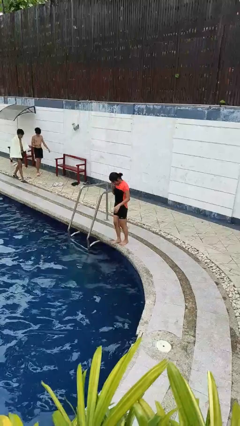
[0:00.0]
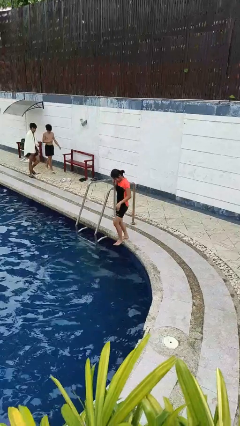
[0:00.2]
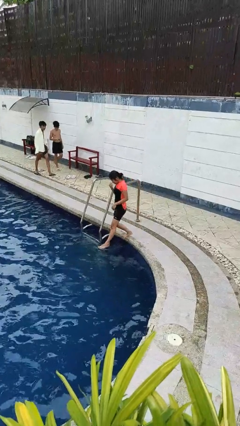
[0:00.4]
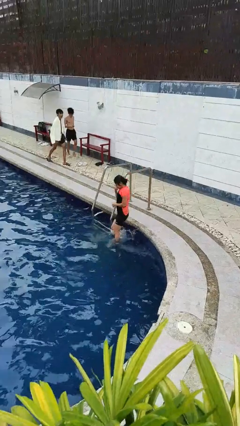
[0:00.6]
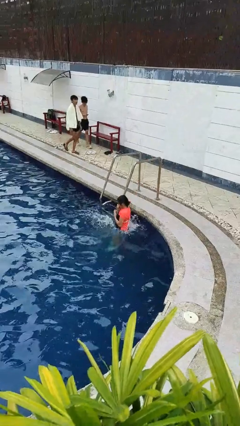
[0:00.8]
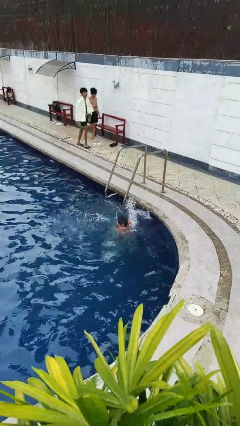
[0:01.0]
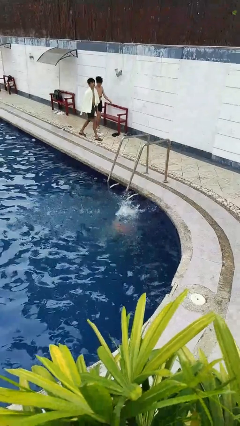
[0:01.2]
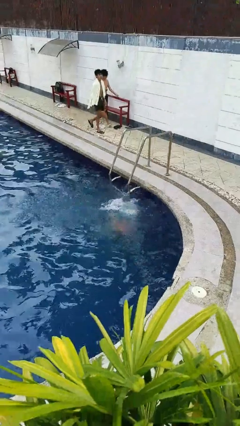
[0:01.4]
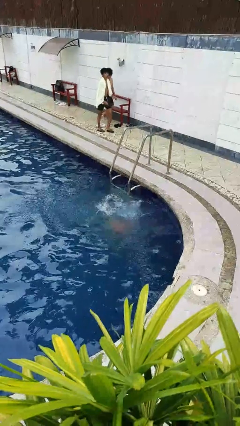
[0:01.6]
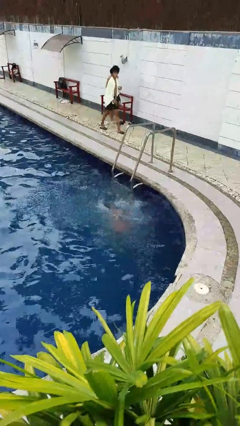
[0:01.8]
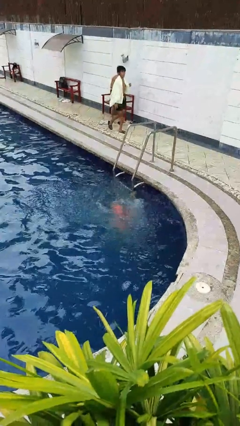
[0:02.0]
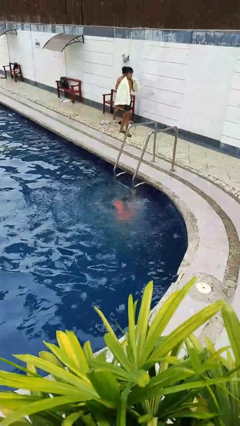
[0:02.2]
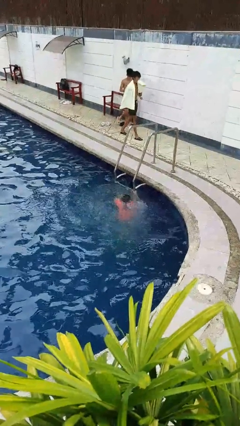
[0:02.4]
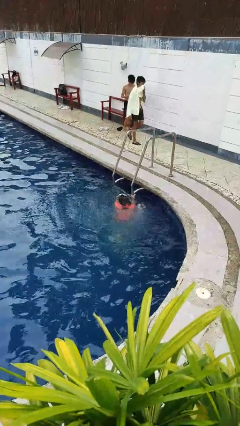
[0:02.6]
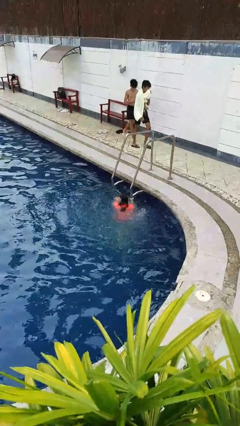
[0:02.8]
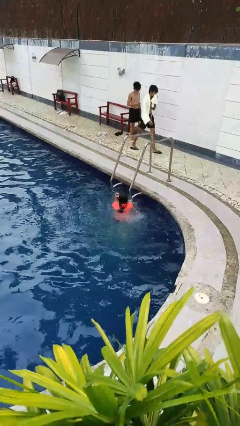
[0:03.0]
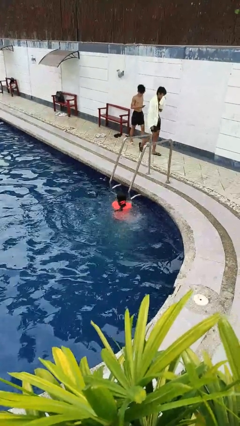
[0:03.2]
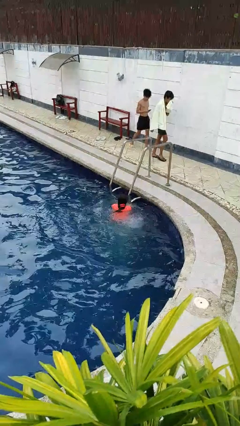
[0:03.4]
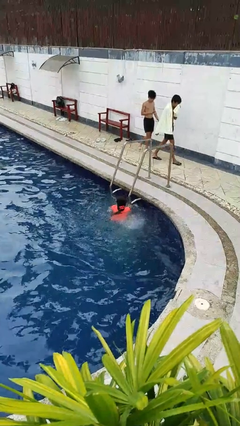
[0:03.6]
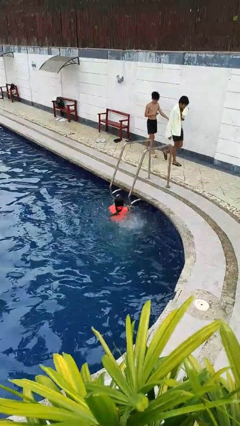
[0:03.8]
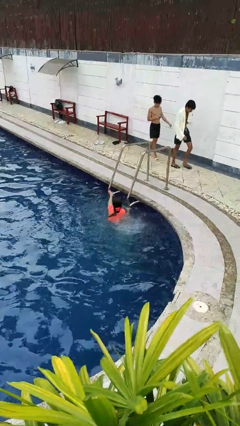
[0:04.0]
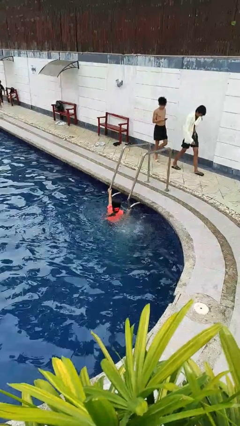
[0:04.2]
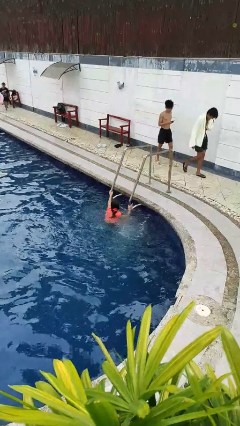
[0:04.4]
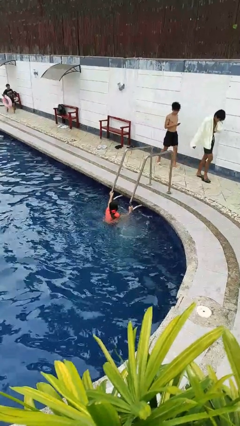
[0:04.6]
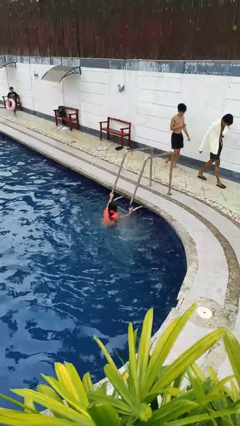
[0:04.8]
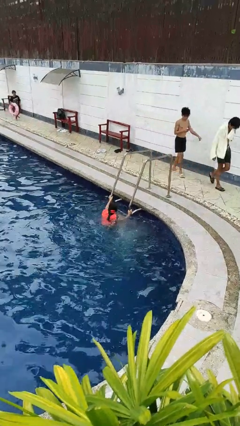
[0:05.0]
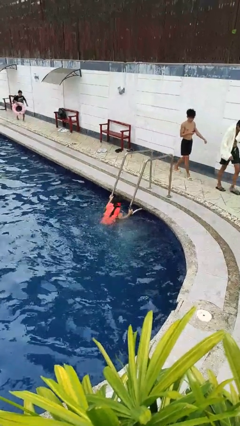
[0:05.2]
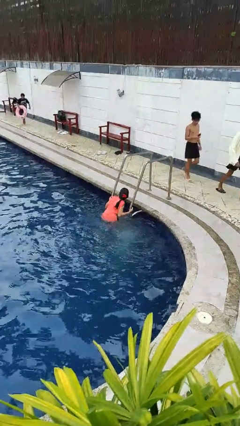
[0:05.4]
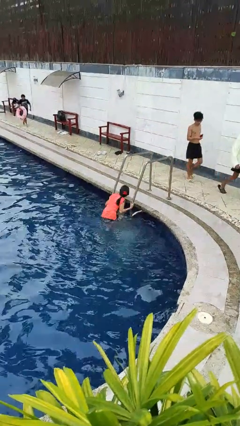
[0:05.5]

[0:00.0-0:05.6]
person jumps into pool

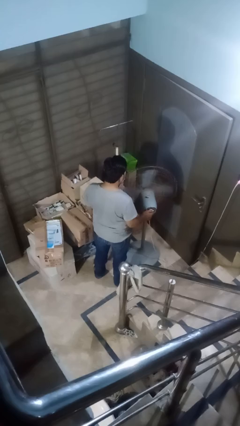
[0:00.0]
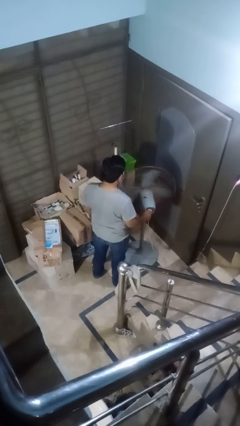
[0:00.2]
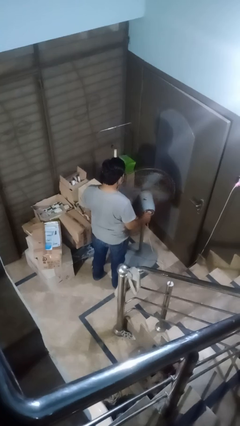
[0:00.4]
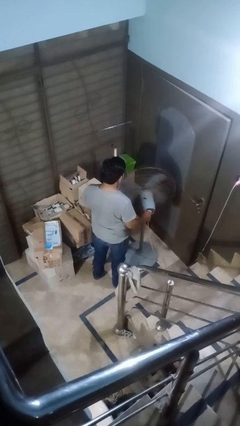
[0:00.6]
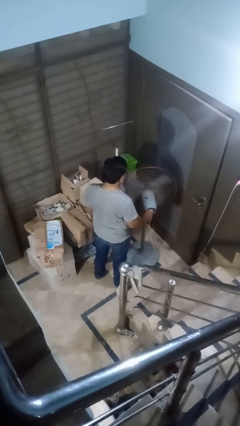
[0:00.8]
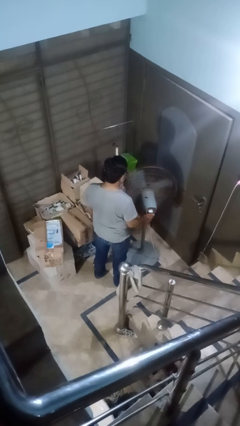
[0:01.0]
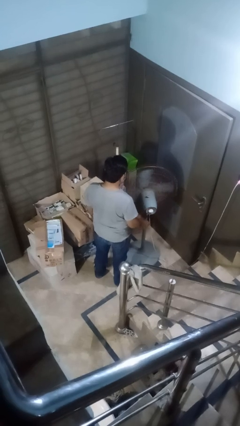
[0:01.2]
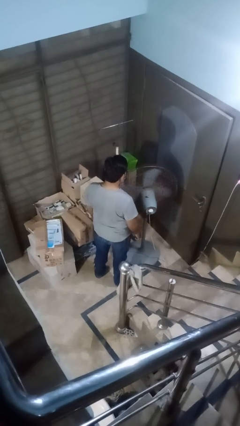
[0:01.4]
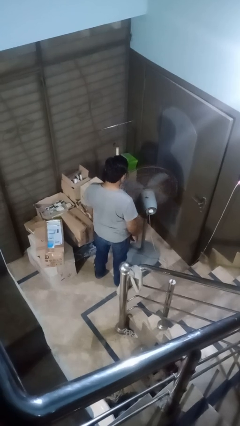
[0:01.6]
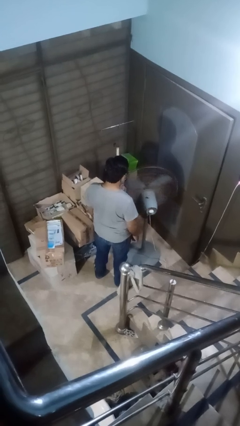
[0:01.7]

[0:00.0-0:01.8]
person turns off fan

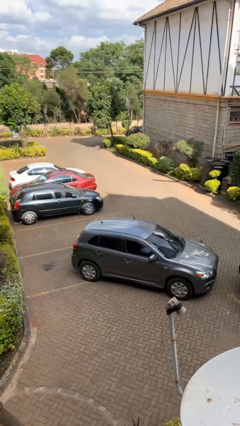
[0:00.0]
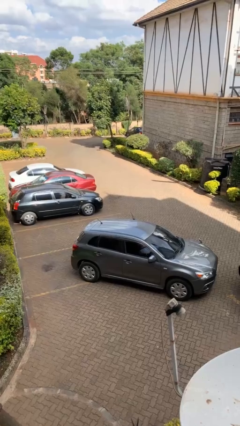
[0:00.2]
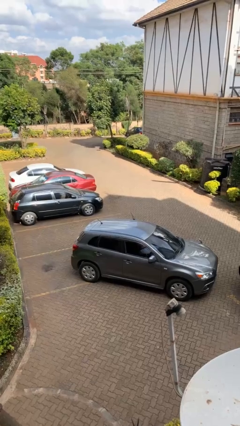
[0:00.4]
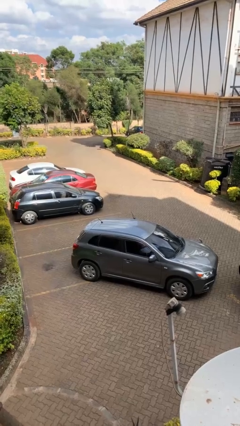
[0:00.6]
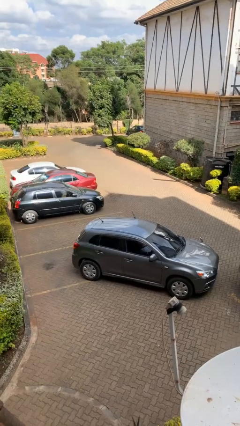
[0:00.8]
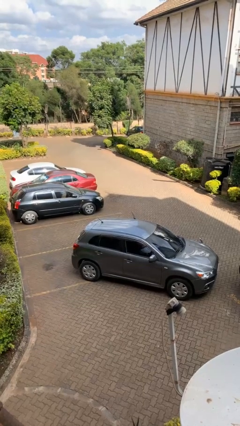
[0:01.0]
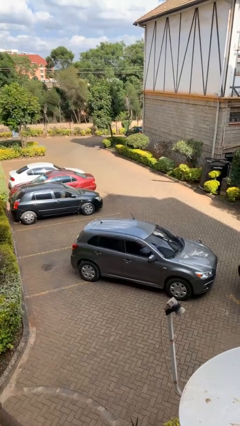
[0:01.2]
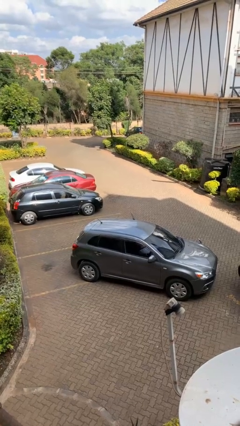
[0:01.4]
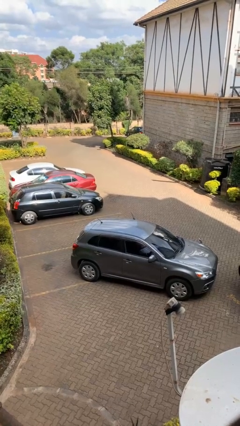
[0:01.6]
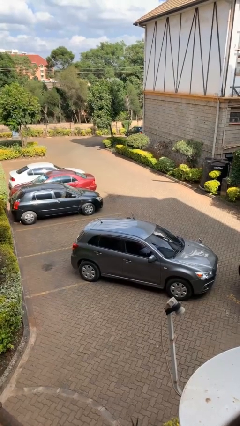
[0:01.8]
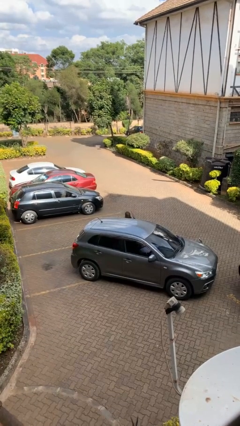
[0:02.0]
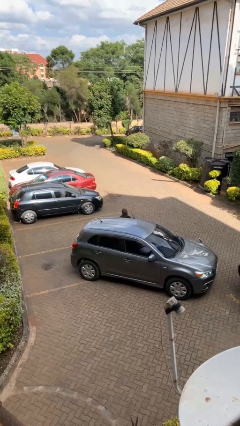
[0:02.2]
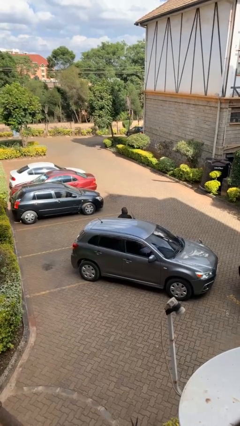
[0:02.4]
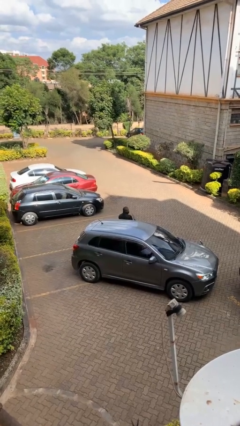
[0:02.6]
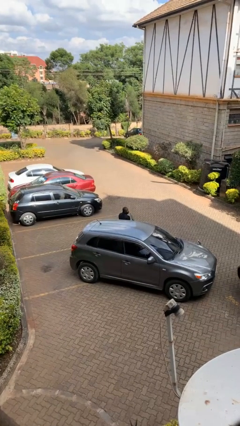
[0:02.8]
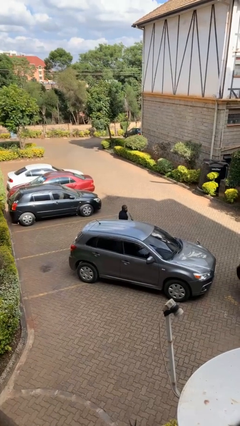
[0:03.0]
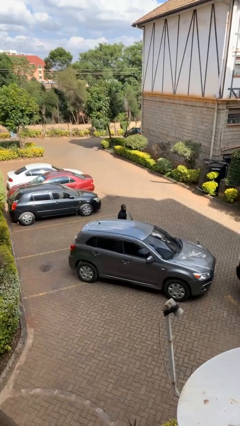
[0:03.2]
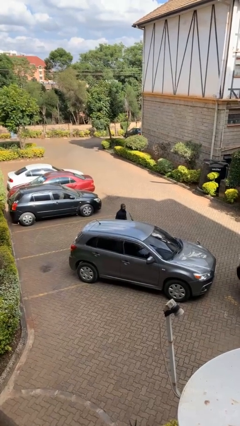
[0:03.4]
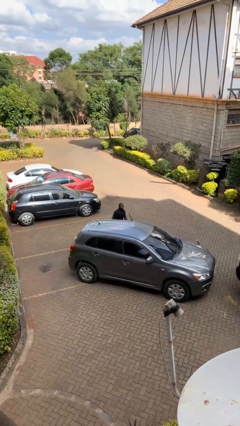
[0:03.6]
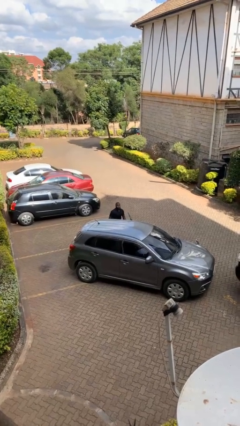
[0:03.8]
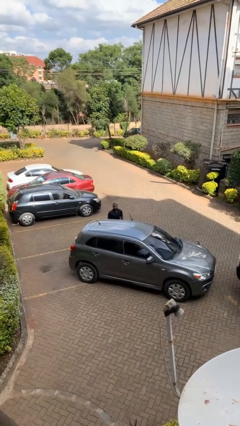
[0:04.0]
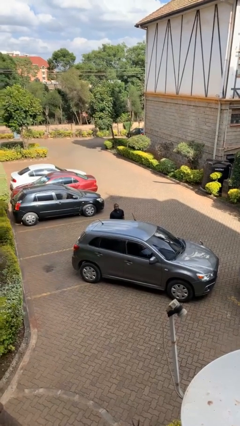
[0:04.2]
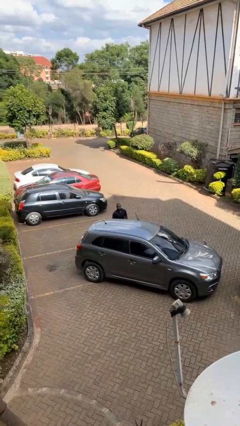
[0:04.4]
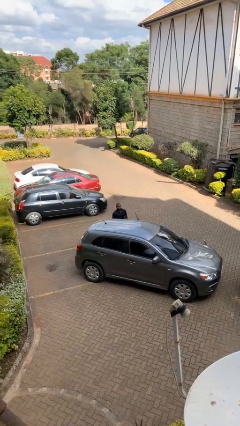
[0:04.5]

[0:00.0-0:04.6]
person exits car

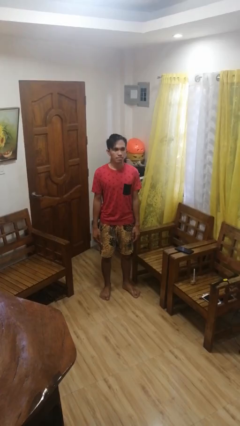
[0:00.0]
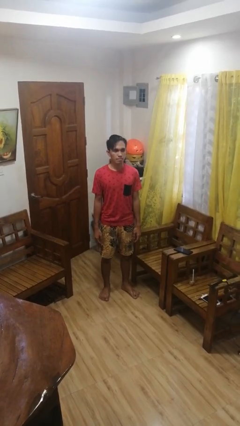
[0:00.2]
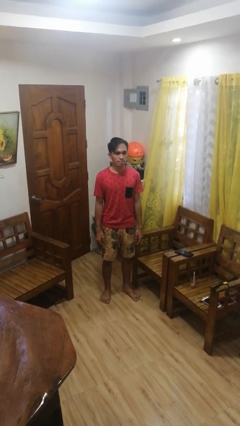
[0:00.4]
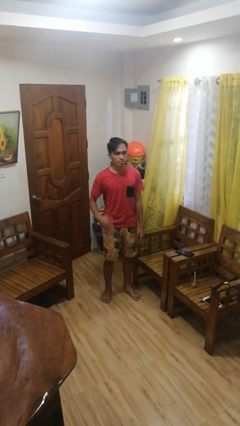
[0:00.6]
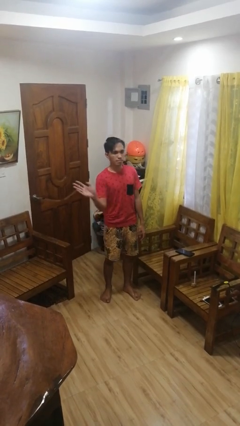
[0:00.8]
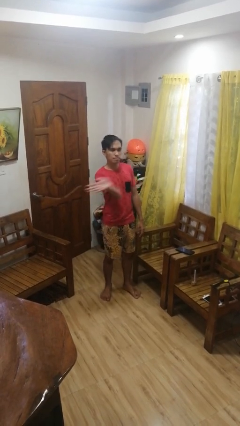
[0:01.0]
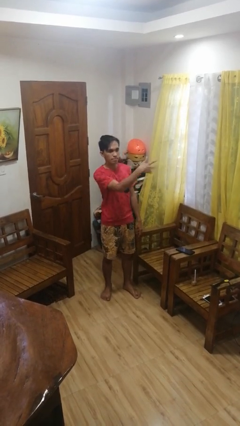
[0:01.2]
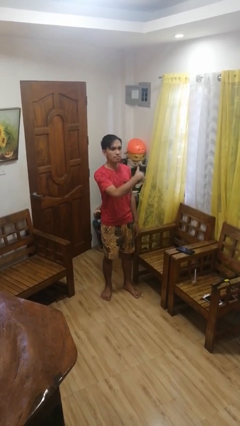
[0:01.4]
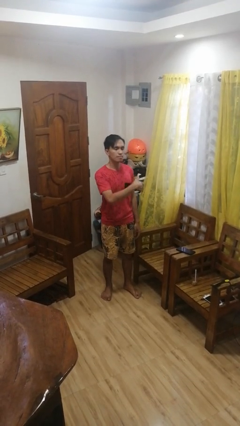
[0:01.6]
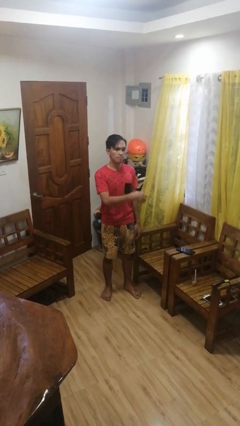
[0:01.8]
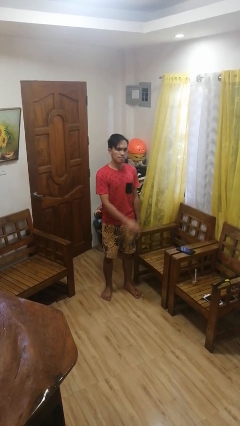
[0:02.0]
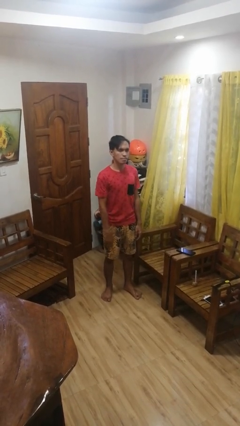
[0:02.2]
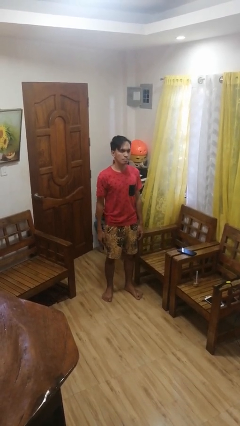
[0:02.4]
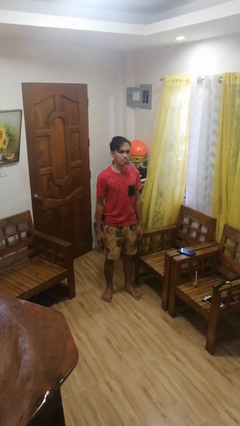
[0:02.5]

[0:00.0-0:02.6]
person gestures swipe left

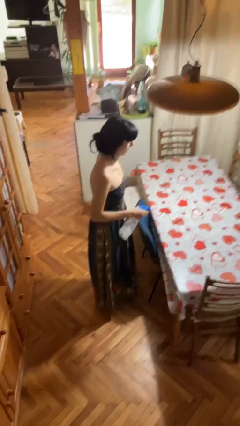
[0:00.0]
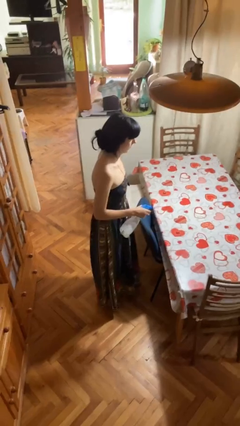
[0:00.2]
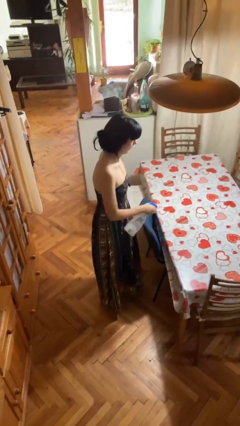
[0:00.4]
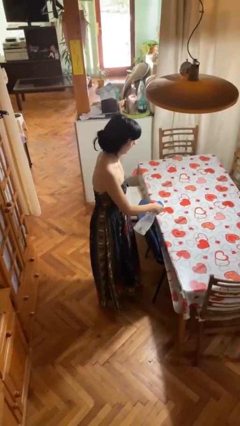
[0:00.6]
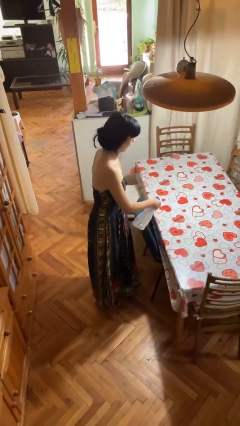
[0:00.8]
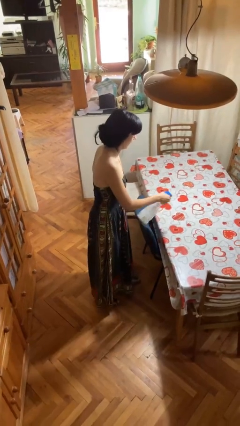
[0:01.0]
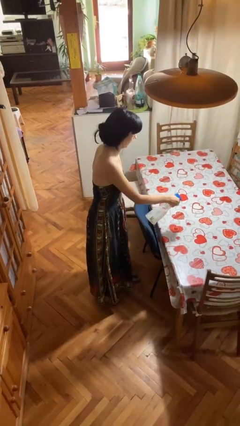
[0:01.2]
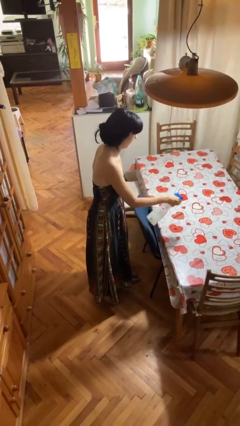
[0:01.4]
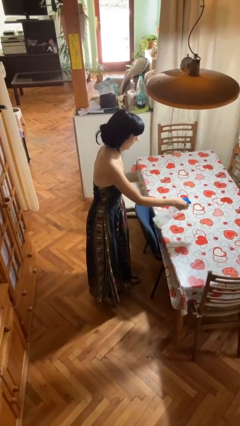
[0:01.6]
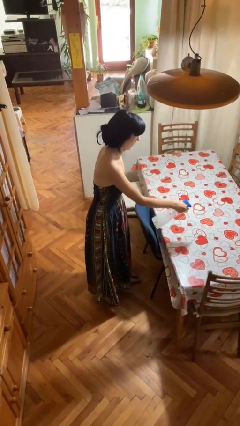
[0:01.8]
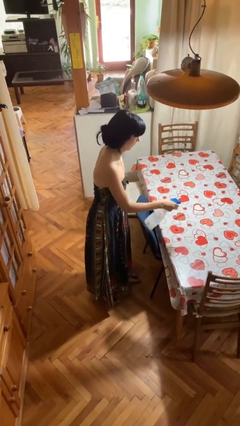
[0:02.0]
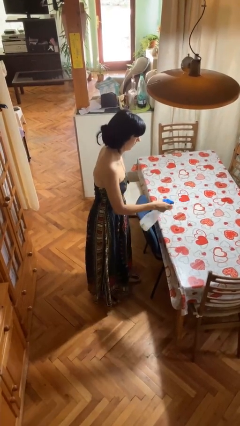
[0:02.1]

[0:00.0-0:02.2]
person sprays from bottle

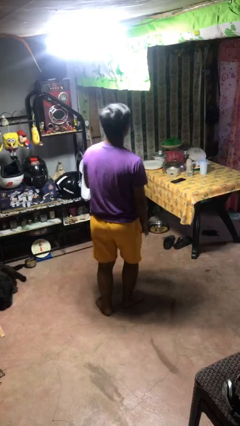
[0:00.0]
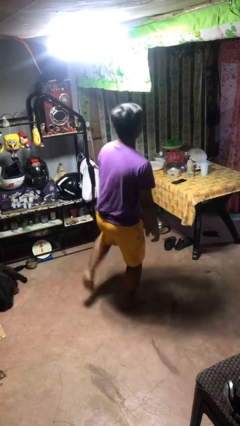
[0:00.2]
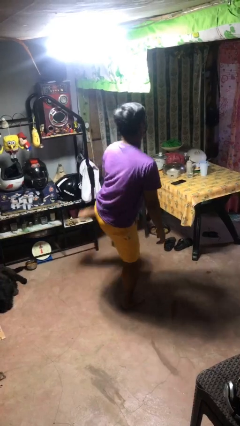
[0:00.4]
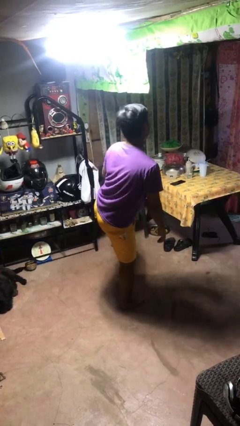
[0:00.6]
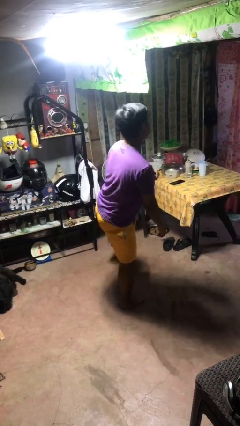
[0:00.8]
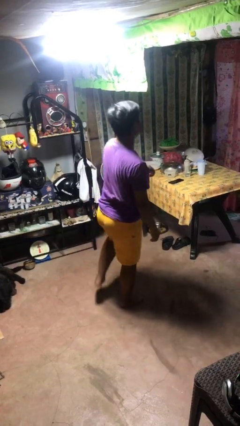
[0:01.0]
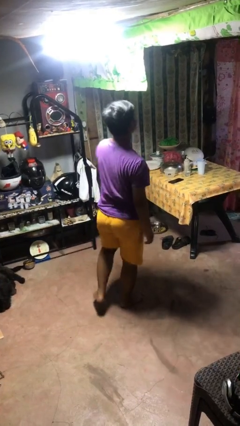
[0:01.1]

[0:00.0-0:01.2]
person karate kicks
